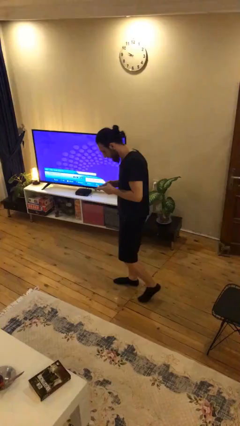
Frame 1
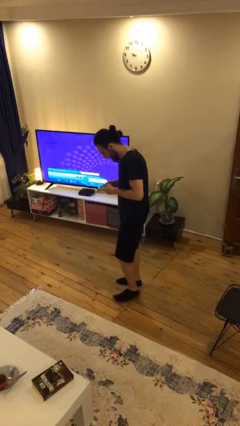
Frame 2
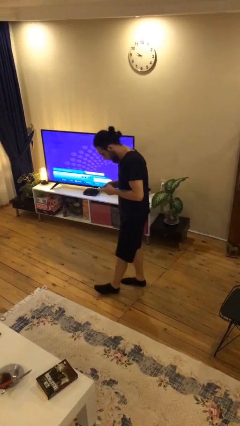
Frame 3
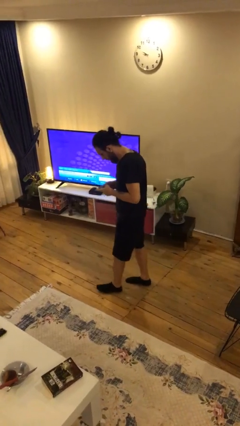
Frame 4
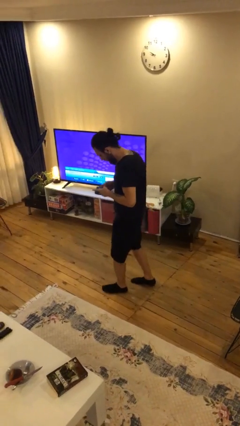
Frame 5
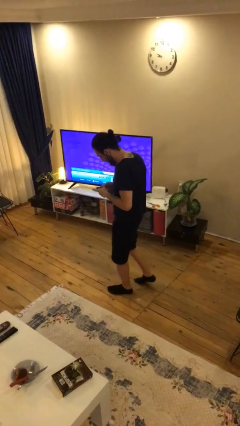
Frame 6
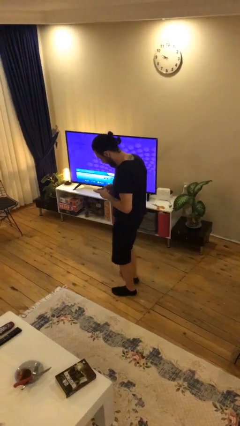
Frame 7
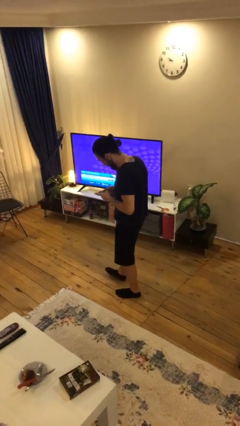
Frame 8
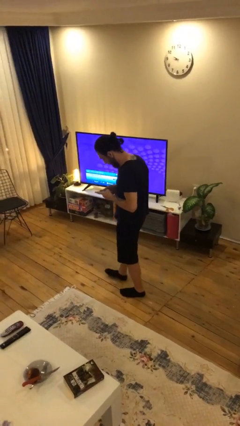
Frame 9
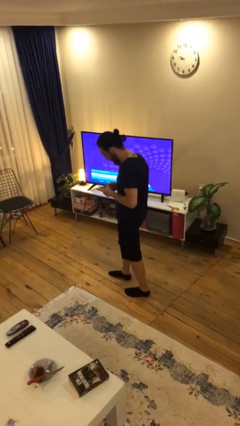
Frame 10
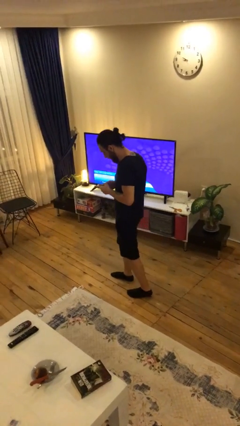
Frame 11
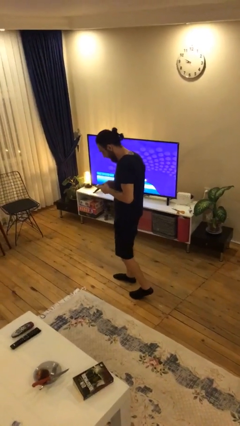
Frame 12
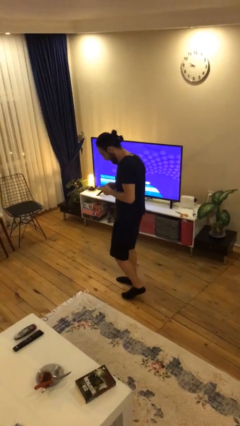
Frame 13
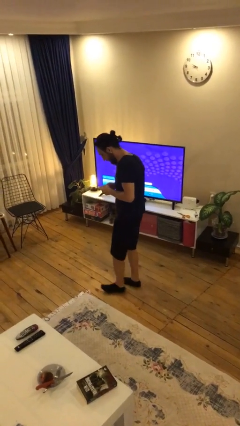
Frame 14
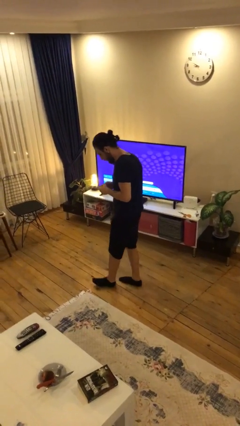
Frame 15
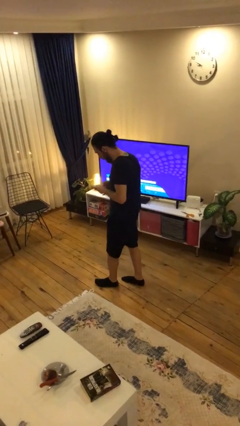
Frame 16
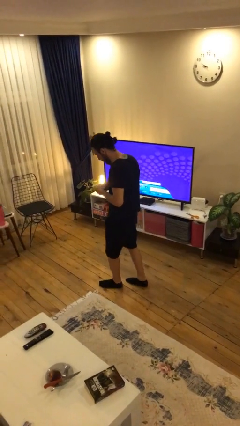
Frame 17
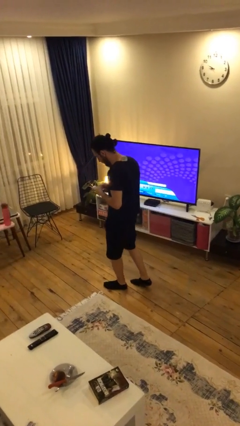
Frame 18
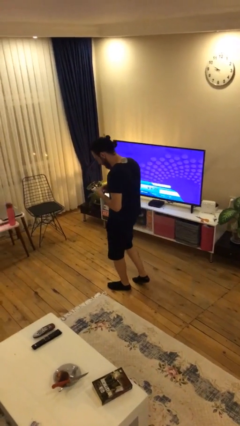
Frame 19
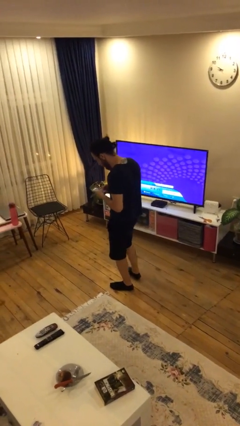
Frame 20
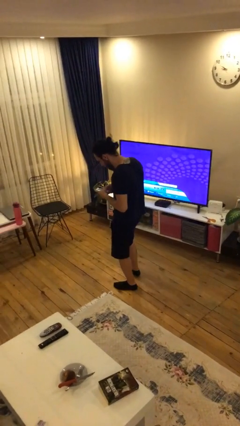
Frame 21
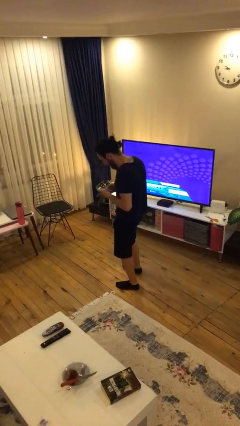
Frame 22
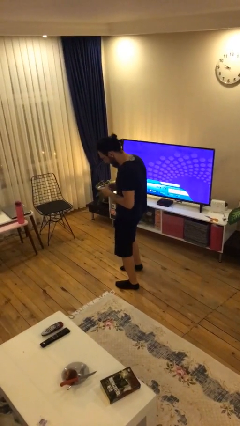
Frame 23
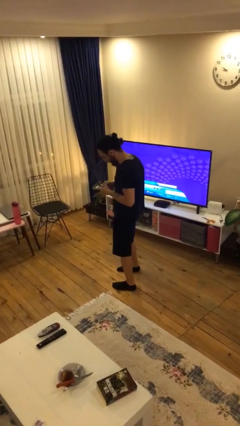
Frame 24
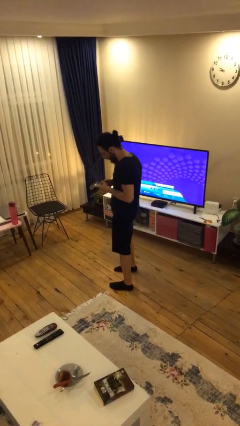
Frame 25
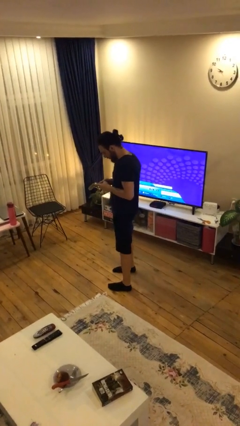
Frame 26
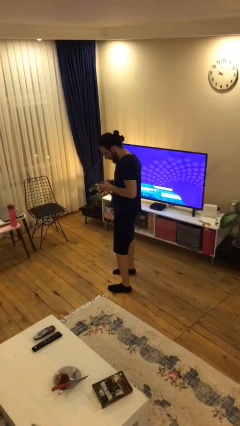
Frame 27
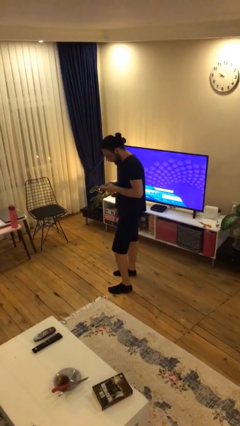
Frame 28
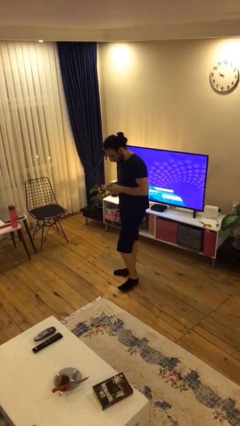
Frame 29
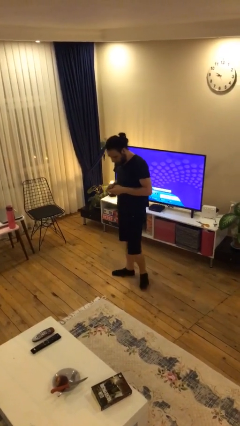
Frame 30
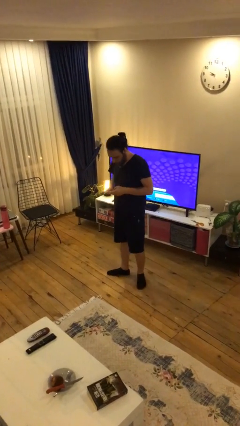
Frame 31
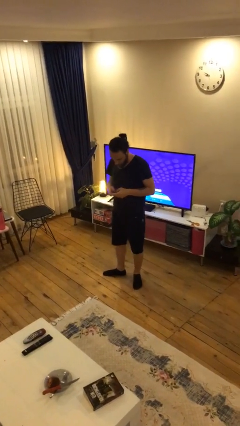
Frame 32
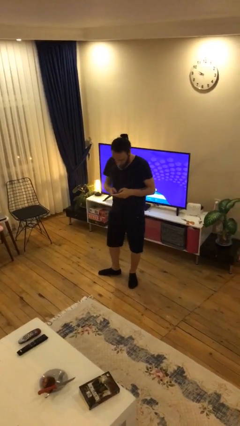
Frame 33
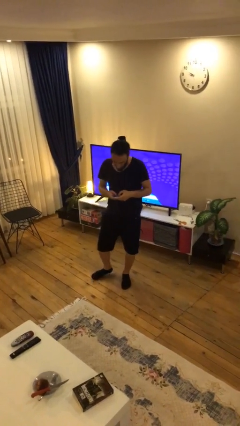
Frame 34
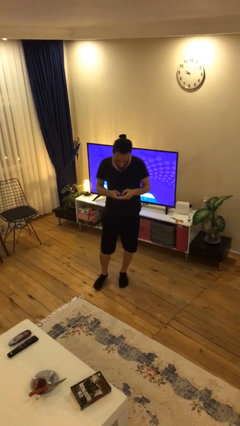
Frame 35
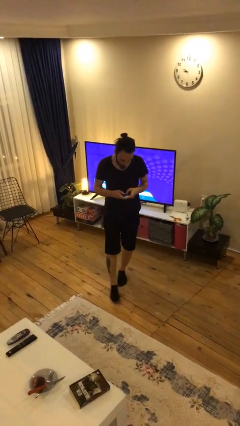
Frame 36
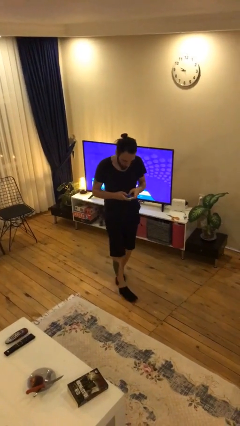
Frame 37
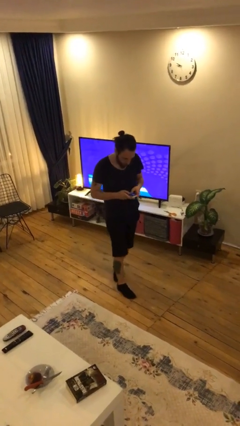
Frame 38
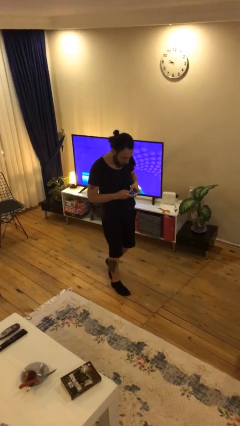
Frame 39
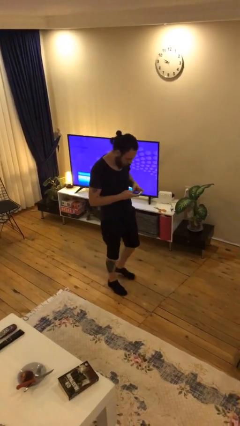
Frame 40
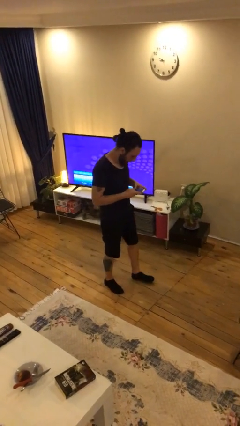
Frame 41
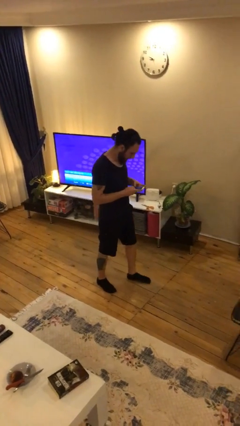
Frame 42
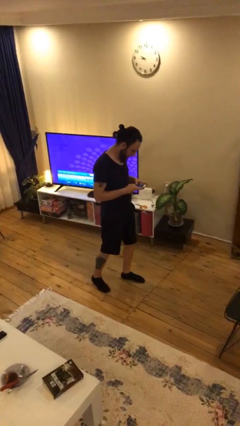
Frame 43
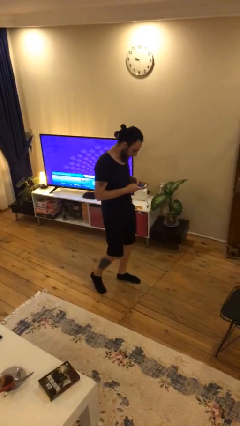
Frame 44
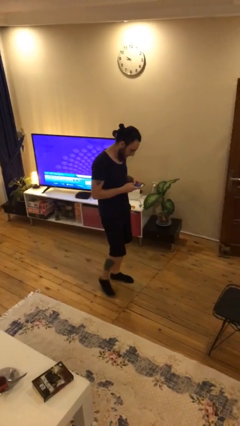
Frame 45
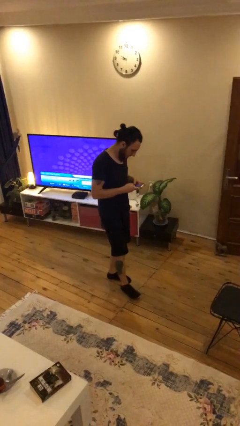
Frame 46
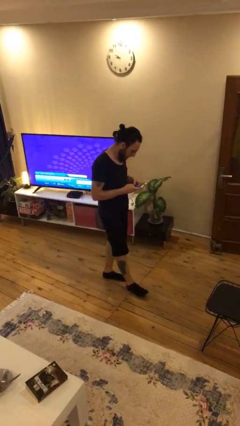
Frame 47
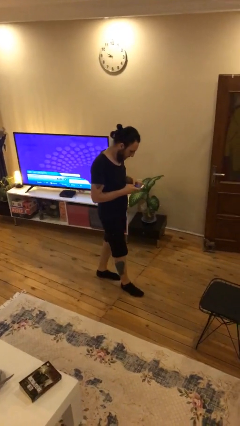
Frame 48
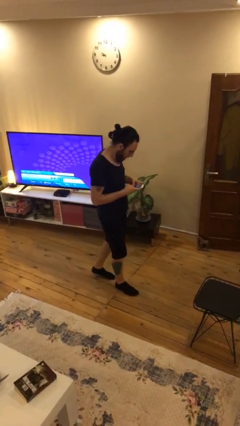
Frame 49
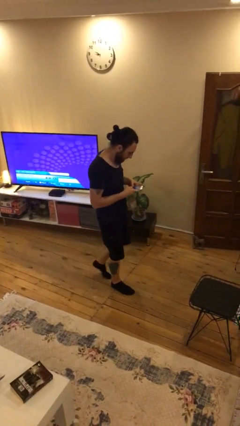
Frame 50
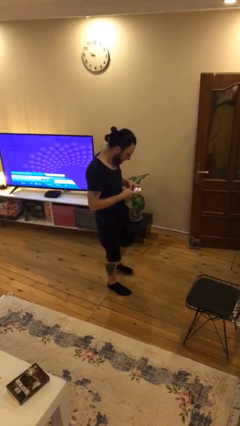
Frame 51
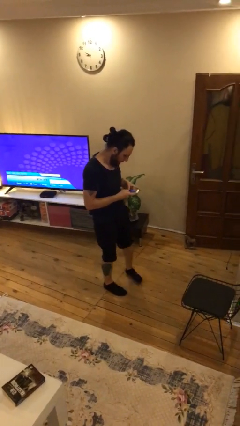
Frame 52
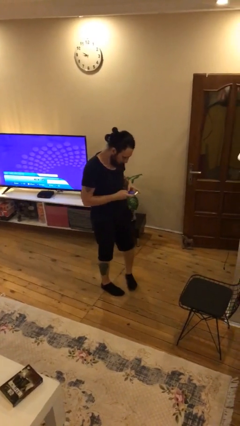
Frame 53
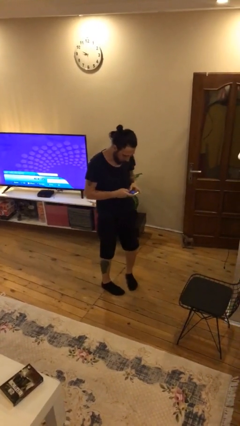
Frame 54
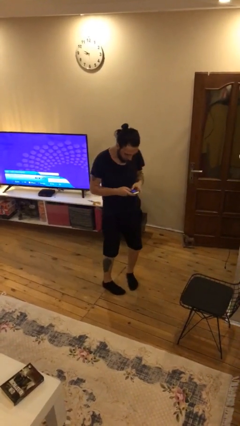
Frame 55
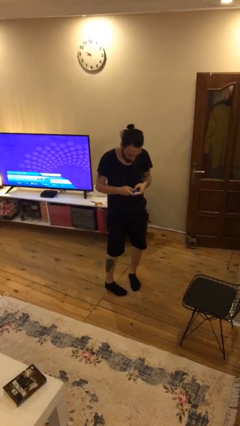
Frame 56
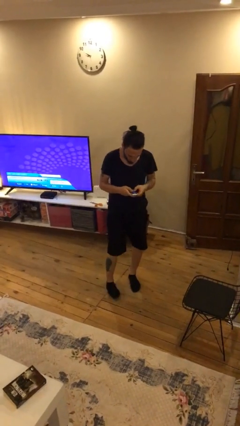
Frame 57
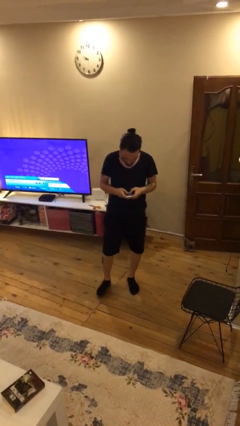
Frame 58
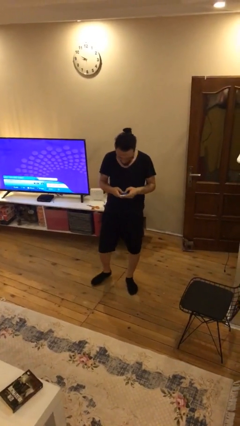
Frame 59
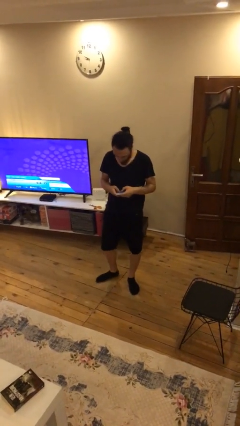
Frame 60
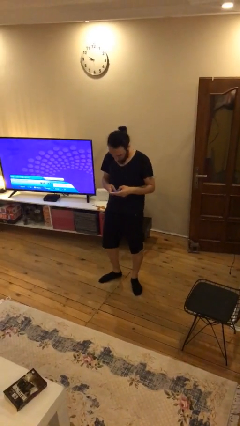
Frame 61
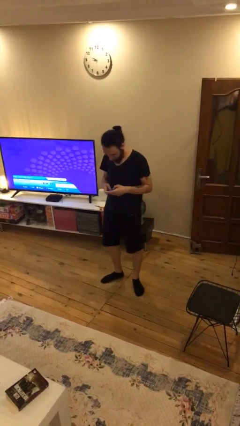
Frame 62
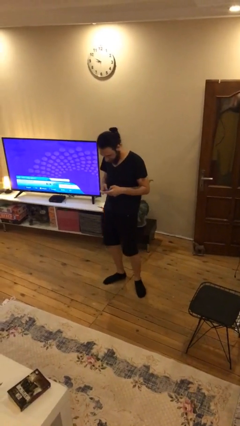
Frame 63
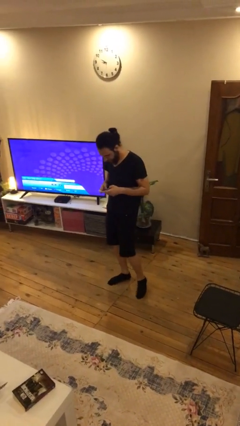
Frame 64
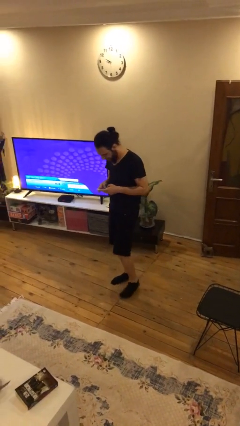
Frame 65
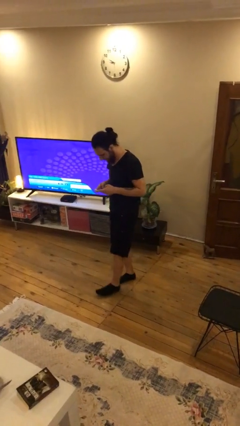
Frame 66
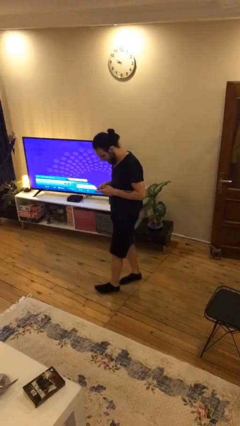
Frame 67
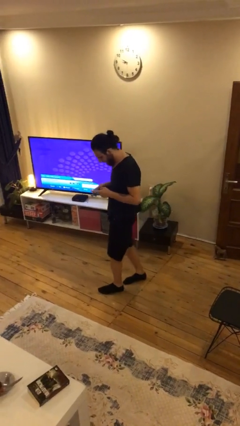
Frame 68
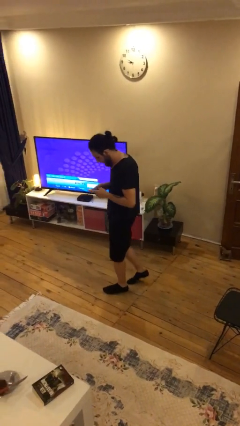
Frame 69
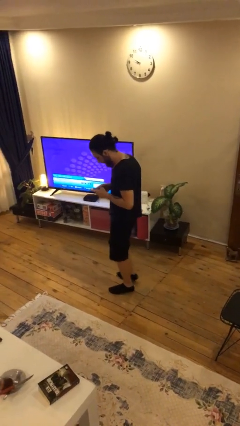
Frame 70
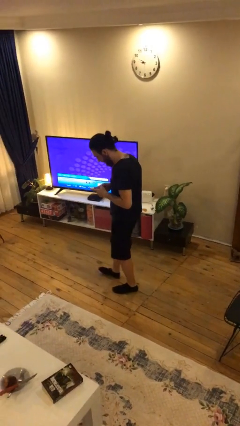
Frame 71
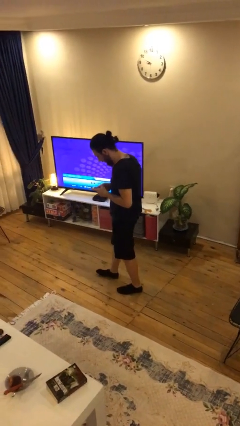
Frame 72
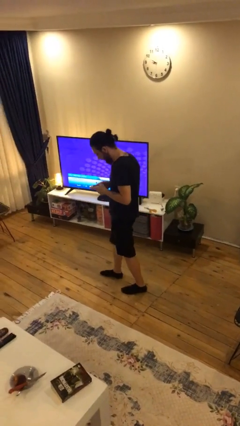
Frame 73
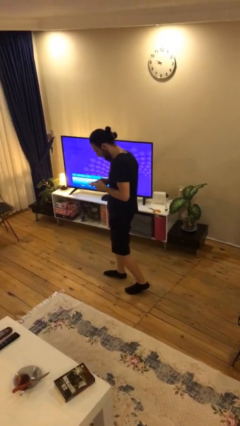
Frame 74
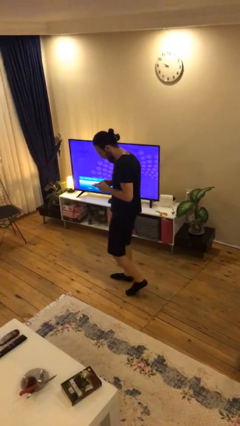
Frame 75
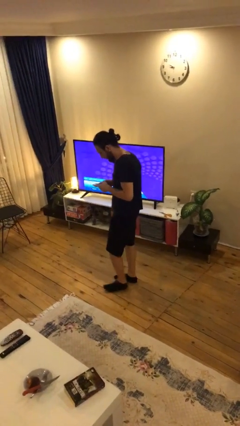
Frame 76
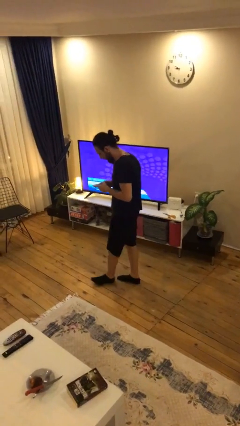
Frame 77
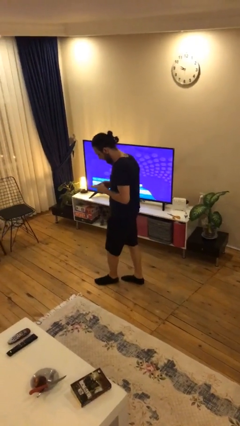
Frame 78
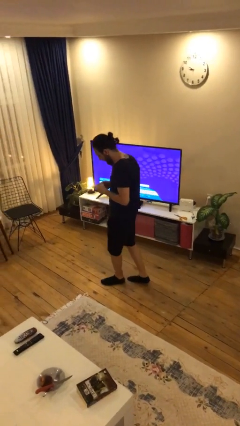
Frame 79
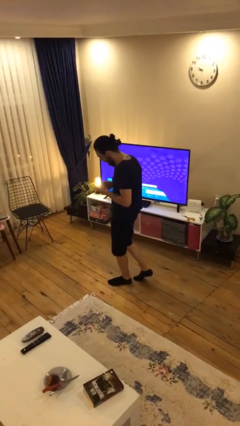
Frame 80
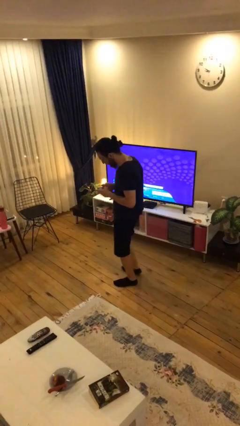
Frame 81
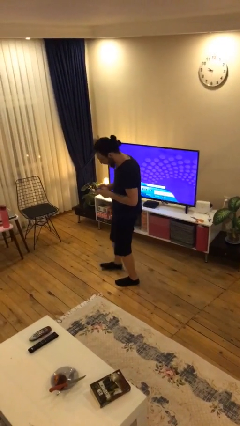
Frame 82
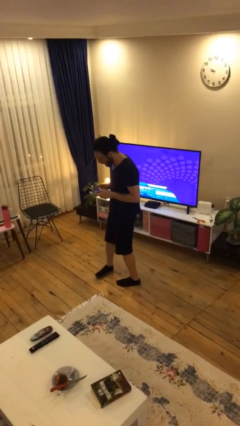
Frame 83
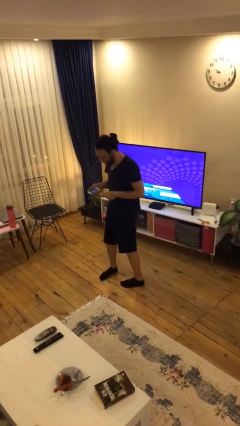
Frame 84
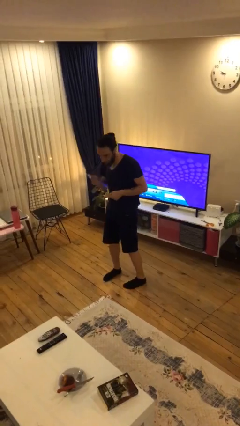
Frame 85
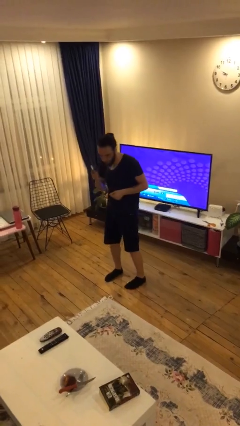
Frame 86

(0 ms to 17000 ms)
person texts on phone

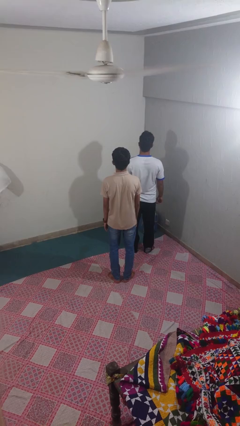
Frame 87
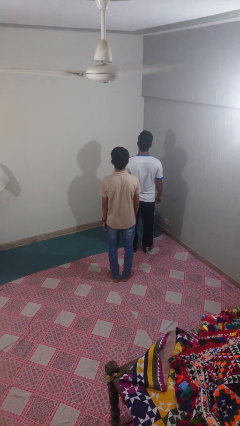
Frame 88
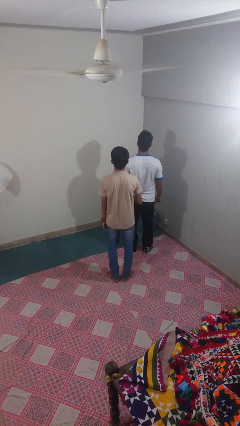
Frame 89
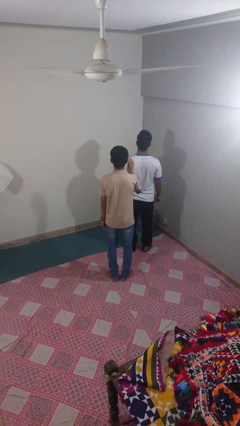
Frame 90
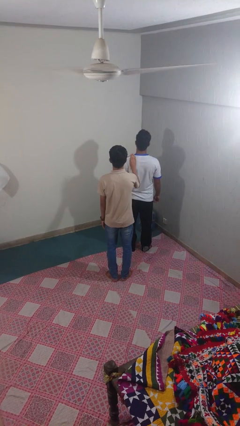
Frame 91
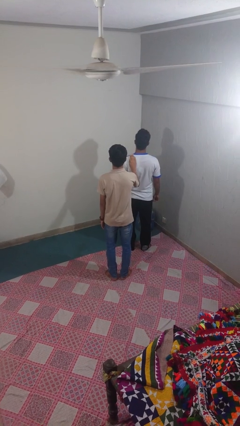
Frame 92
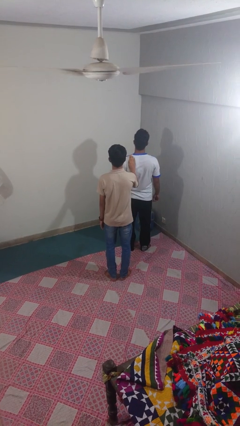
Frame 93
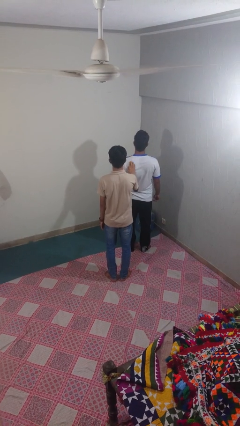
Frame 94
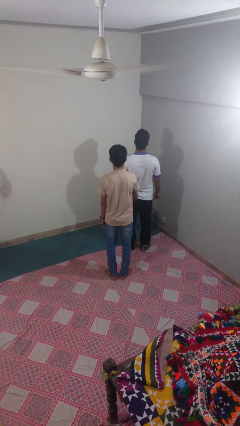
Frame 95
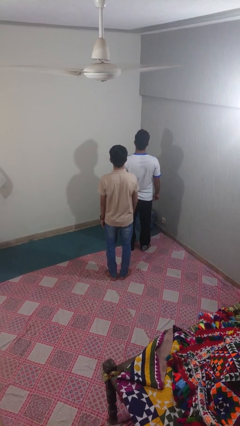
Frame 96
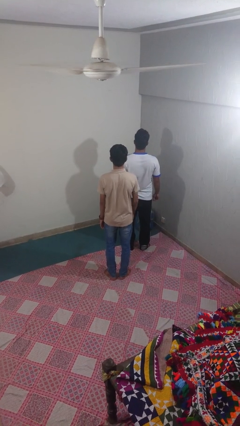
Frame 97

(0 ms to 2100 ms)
person touches back of person
